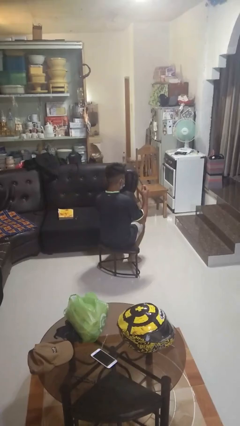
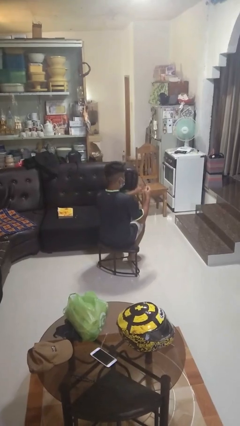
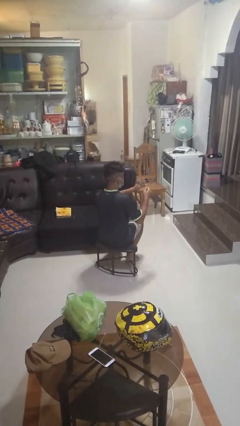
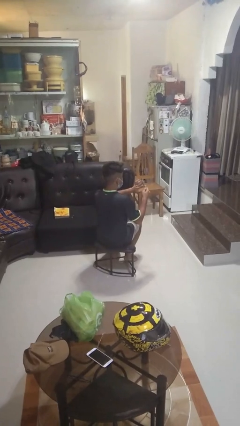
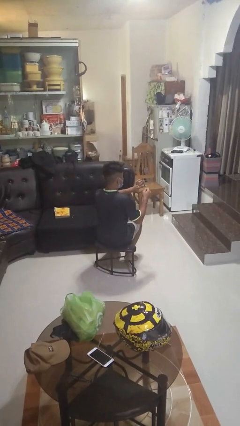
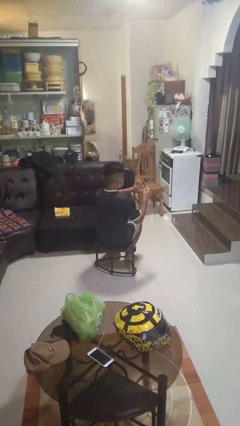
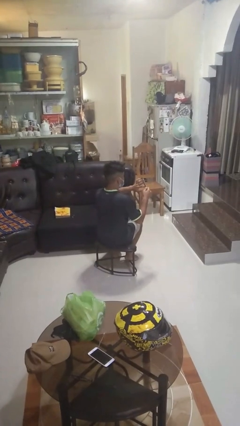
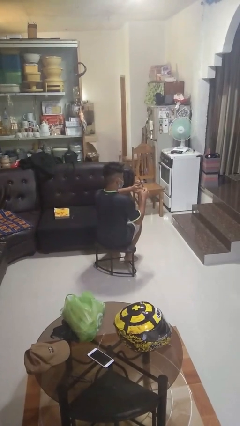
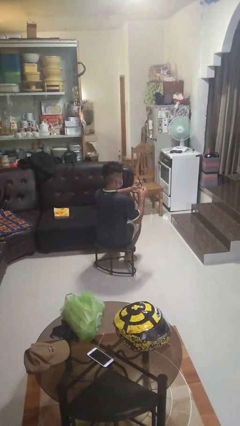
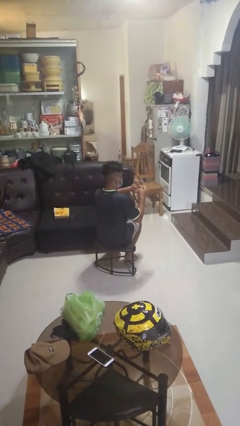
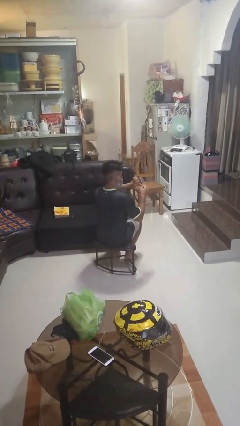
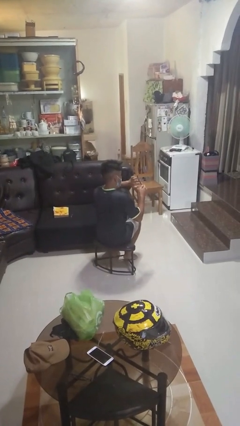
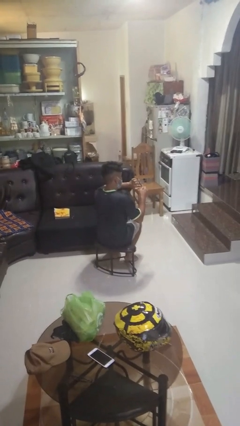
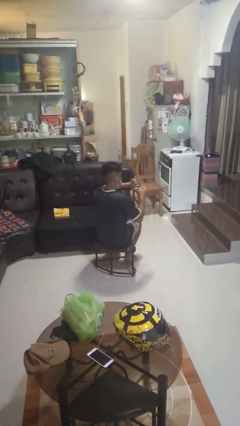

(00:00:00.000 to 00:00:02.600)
person files fingernails

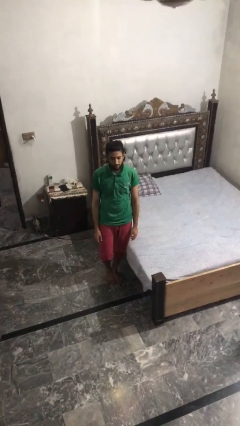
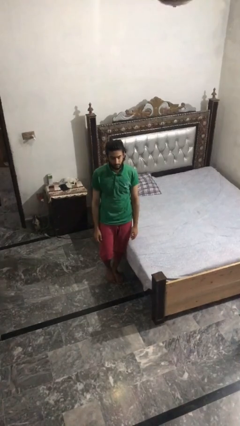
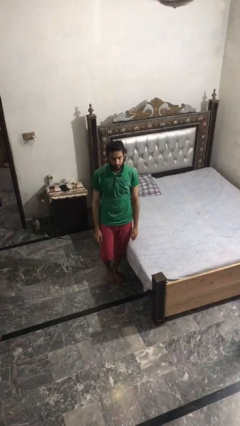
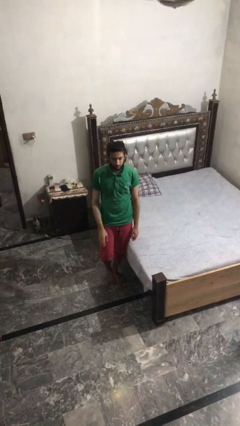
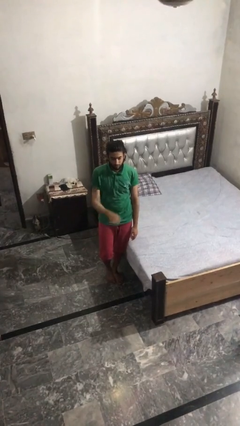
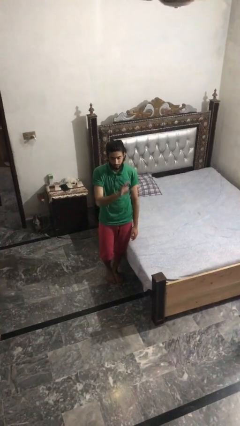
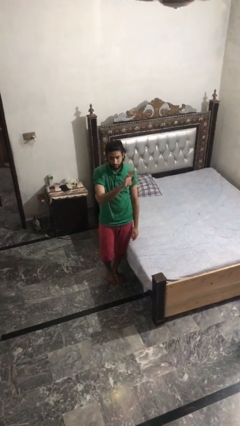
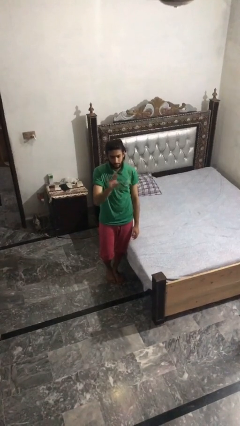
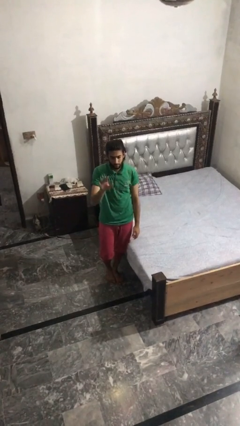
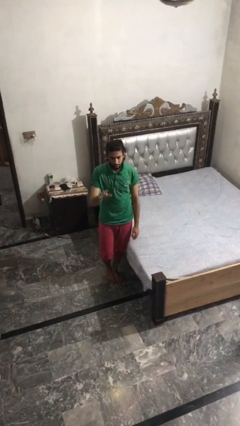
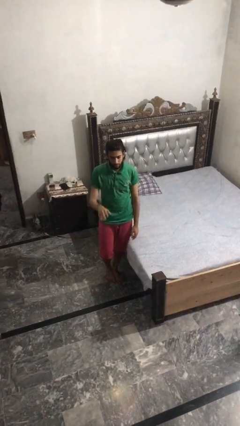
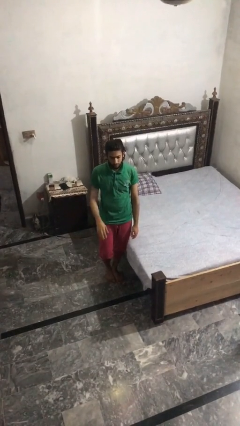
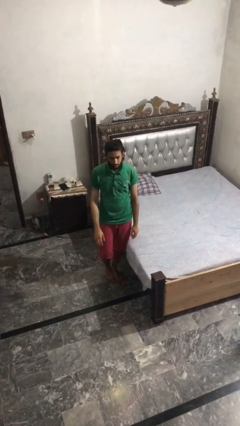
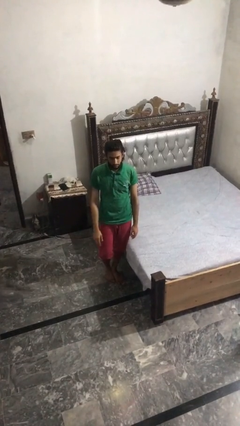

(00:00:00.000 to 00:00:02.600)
person gestures swipe right

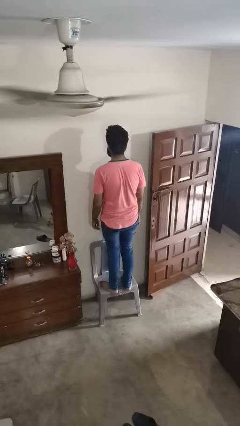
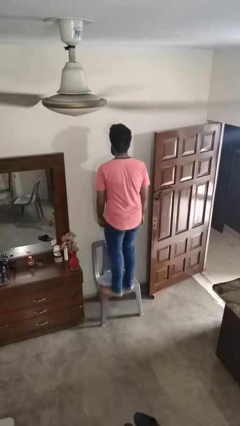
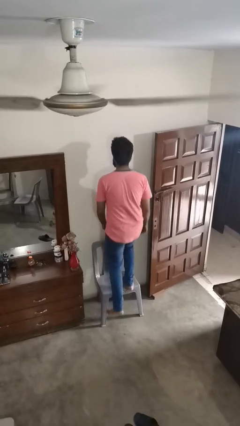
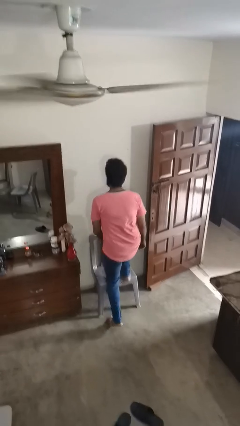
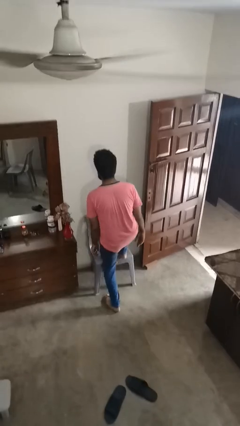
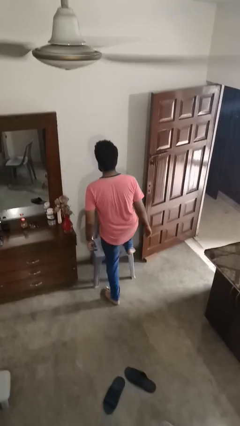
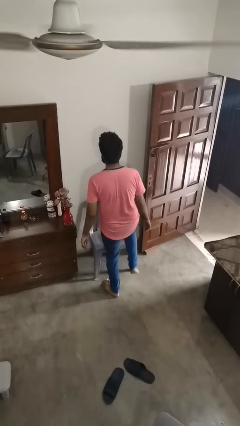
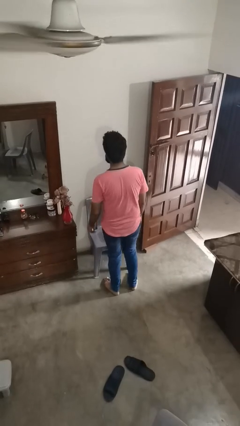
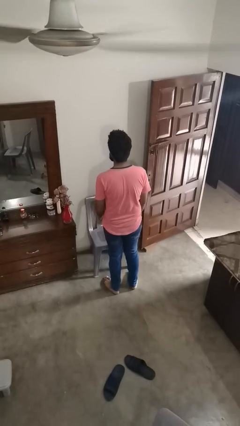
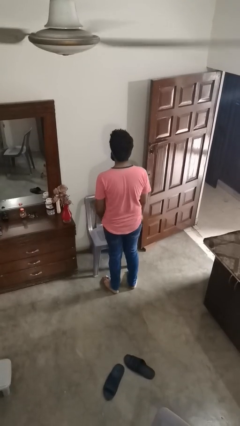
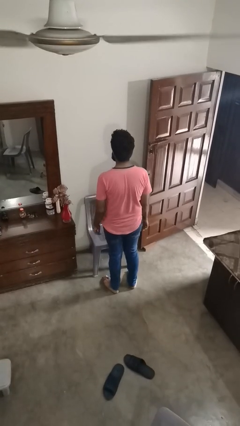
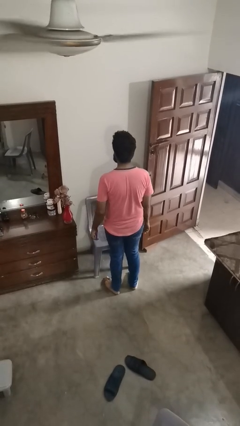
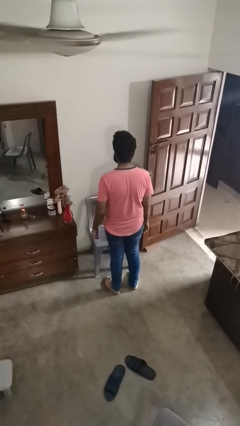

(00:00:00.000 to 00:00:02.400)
person climbs off chair

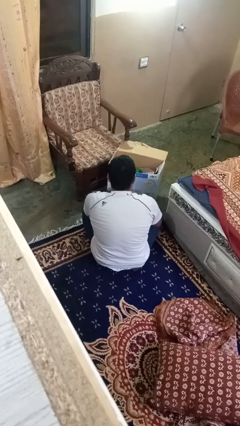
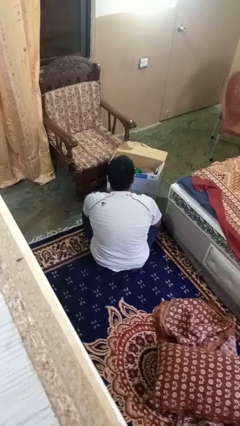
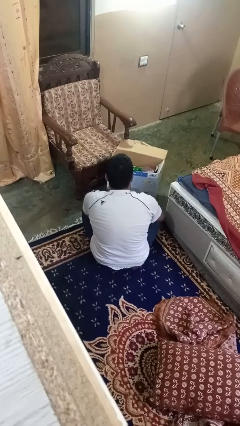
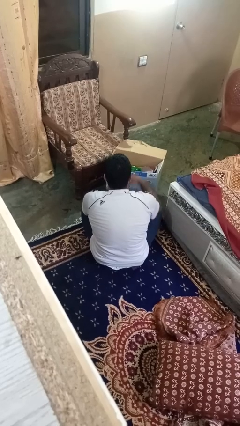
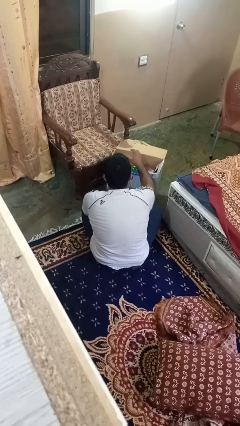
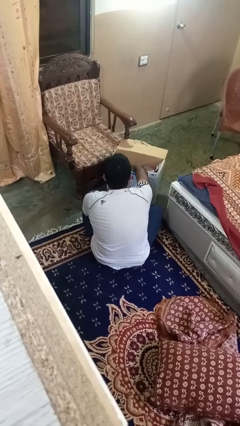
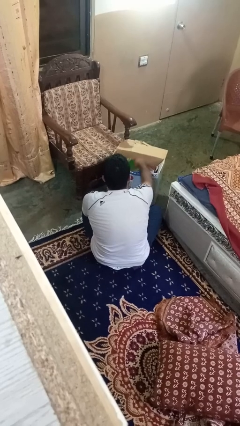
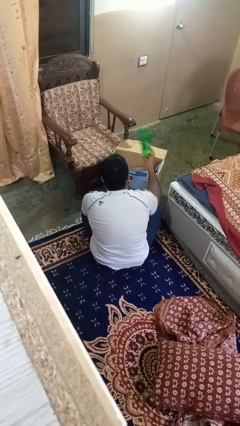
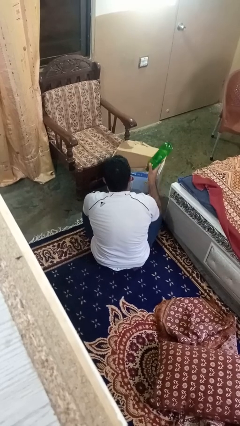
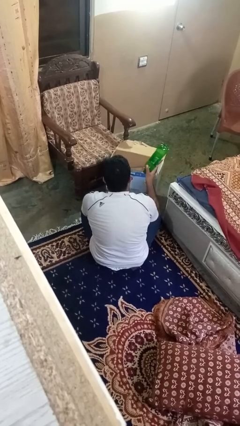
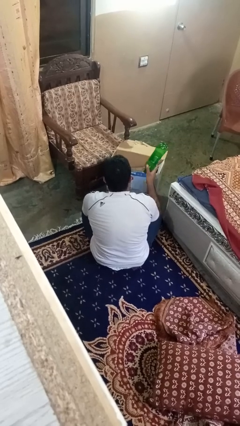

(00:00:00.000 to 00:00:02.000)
person takes object from box

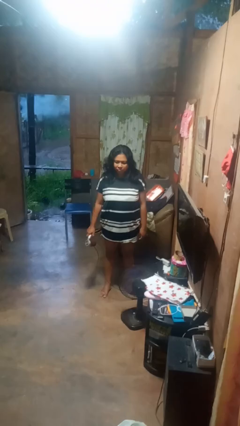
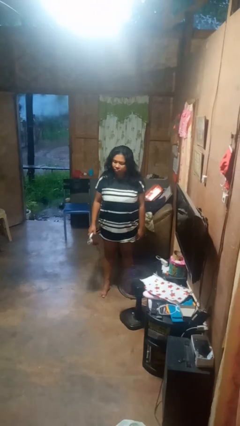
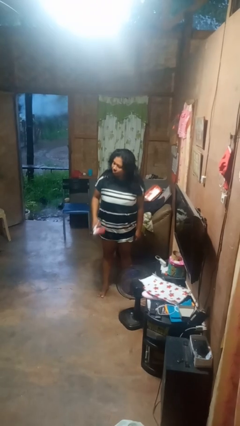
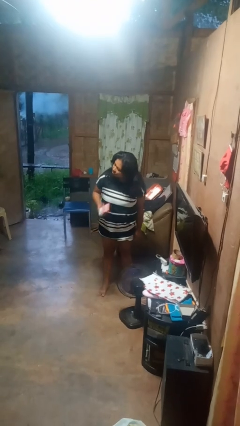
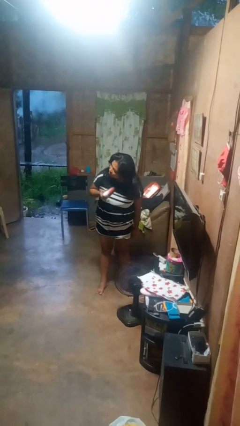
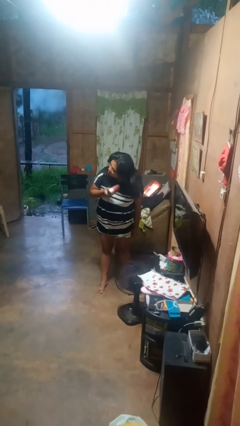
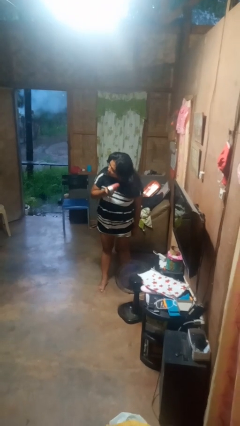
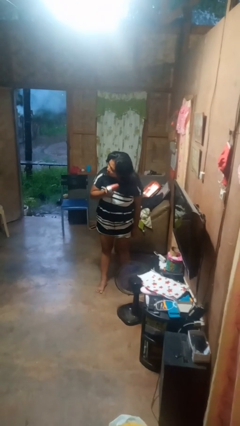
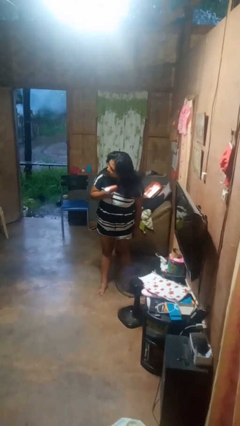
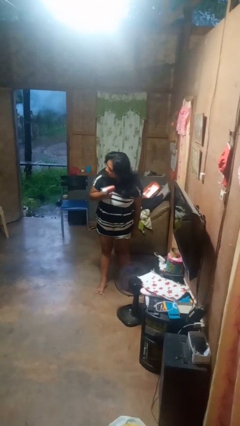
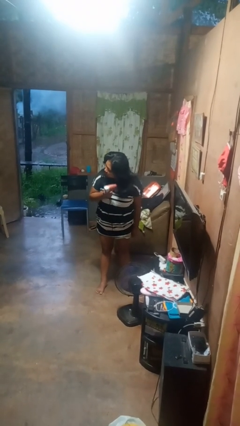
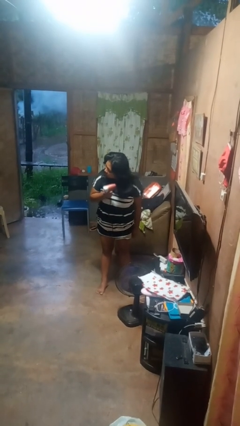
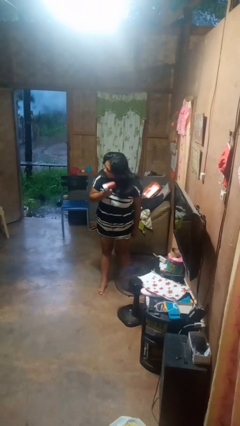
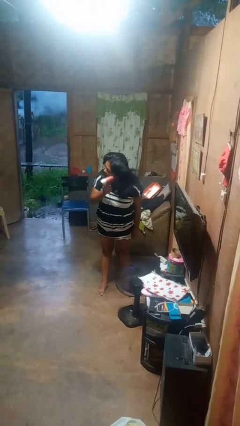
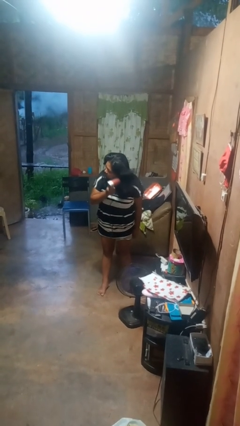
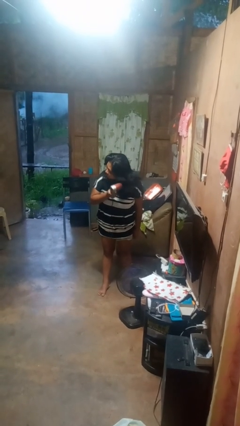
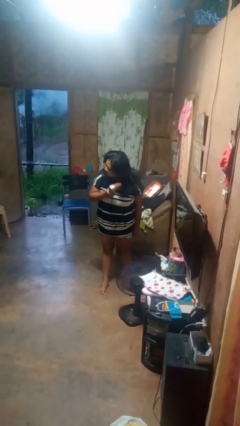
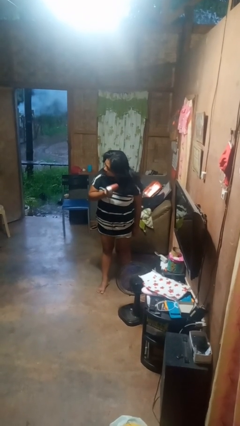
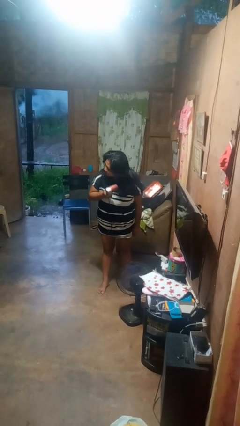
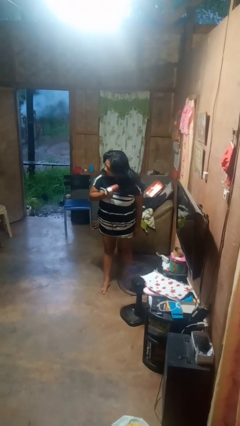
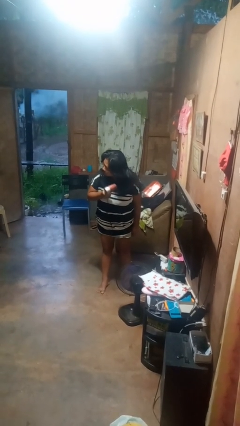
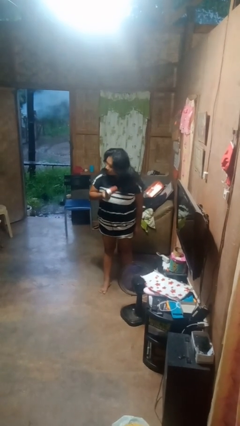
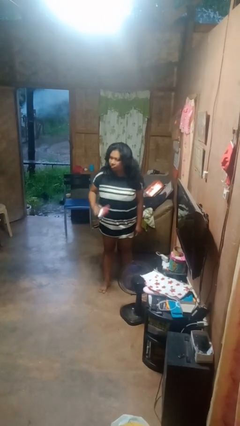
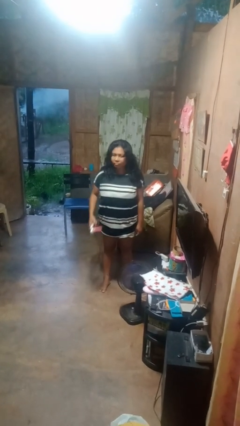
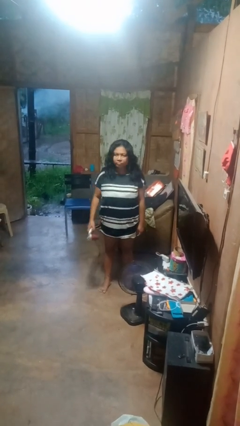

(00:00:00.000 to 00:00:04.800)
person dries hair with hairdryer

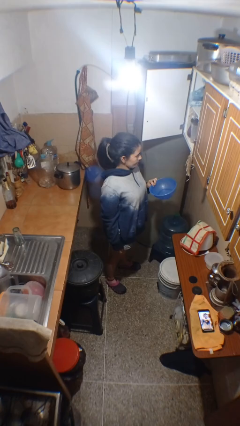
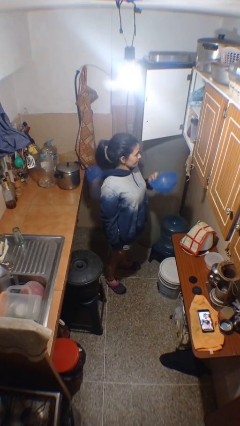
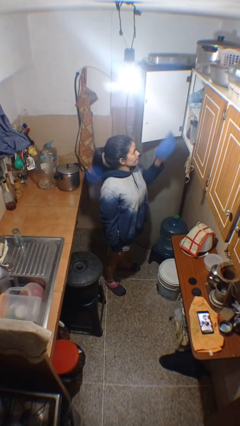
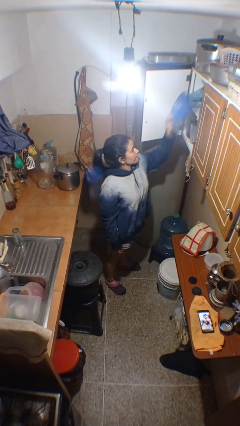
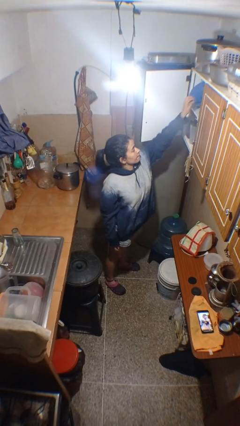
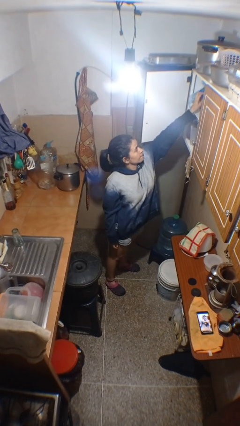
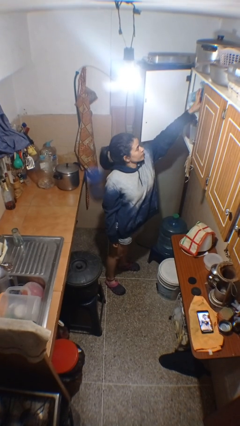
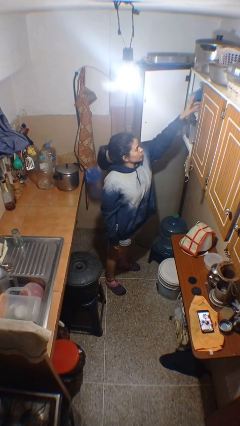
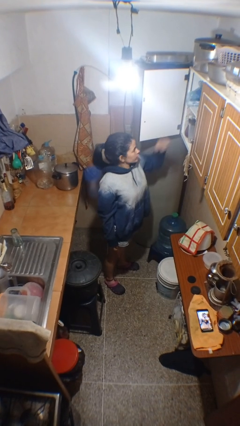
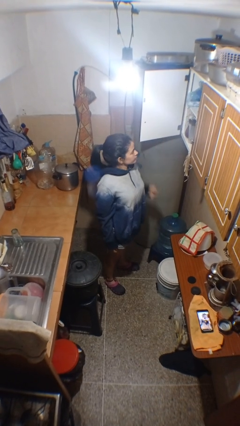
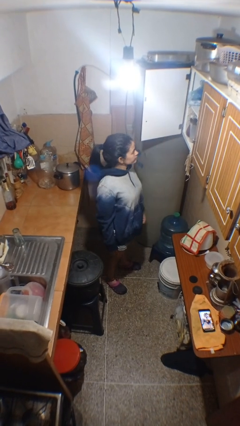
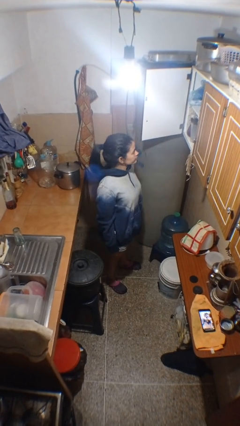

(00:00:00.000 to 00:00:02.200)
person puts down object into cabinet

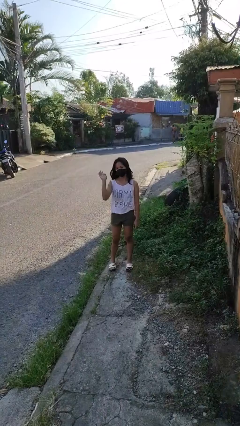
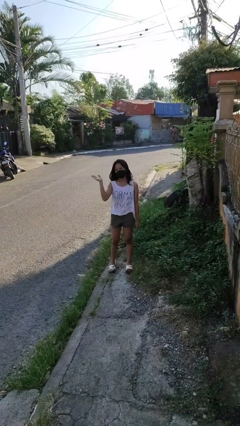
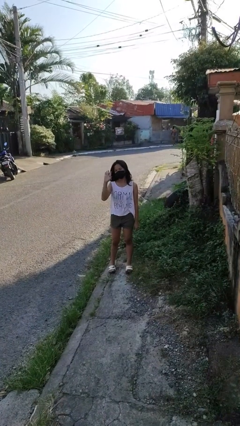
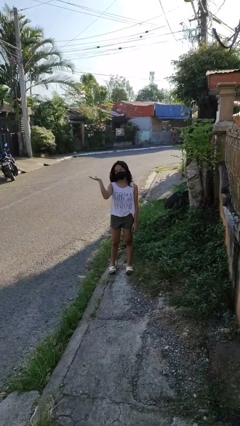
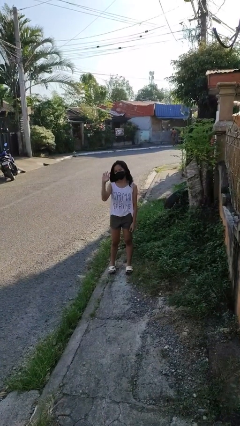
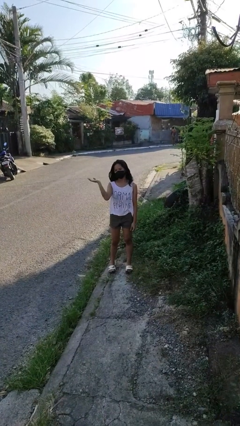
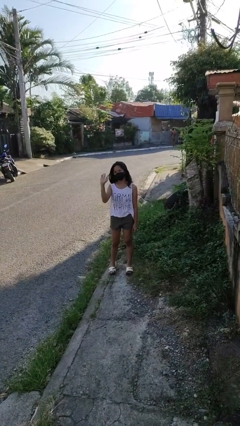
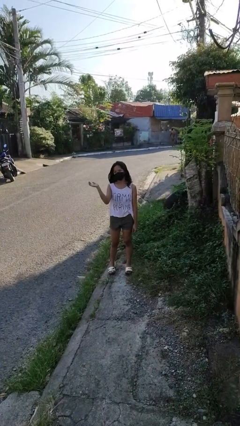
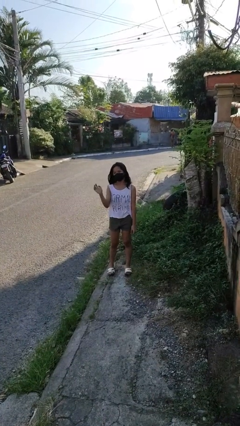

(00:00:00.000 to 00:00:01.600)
person waves at person
